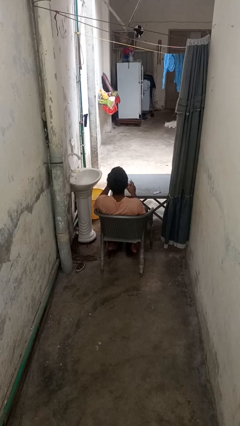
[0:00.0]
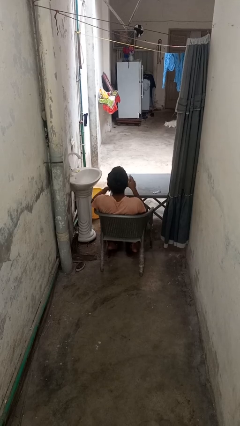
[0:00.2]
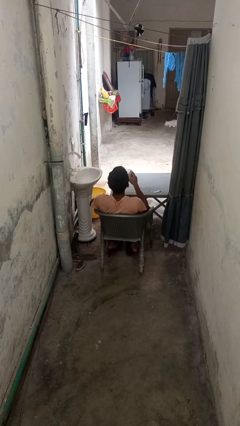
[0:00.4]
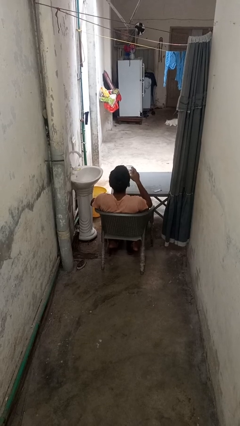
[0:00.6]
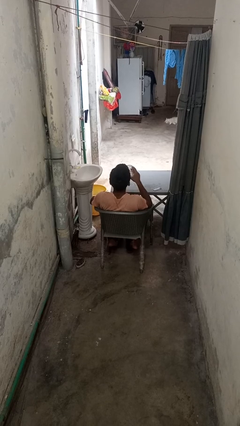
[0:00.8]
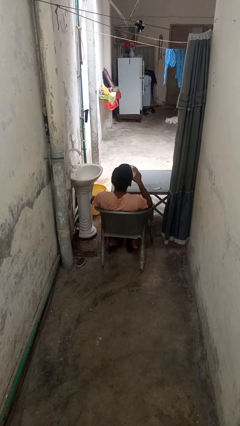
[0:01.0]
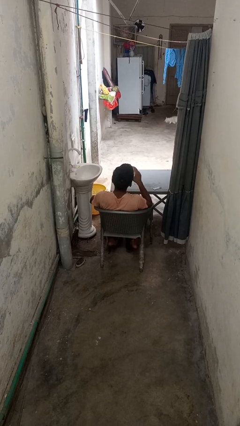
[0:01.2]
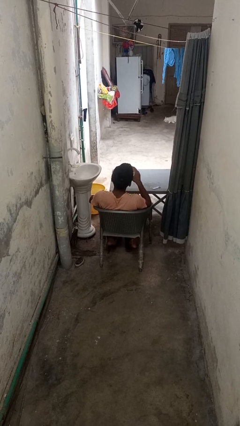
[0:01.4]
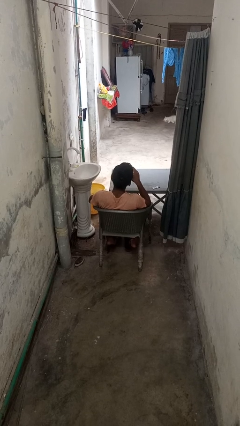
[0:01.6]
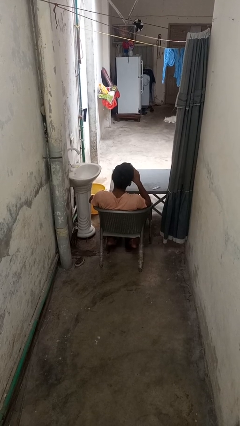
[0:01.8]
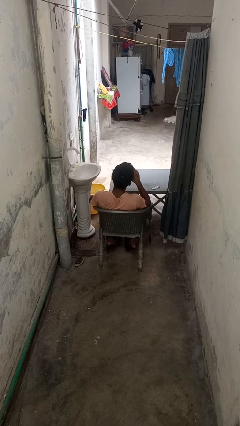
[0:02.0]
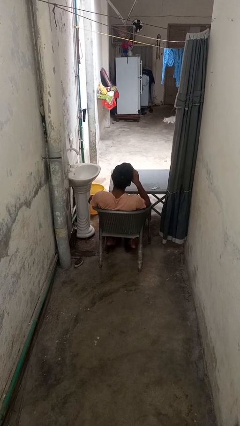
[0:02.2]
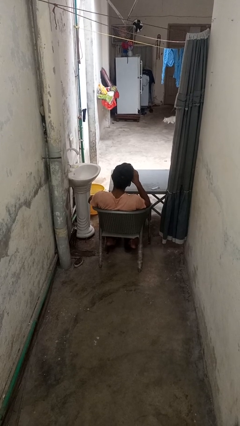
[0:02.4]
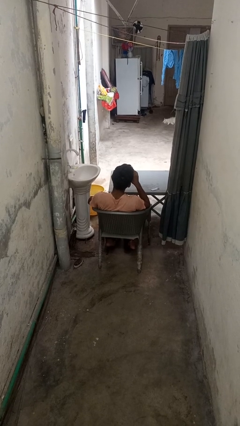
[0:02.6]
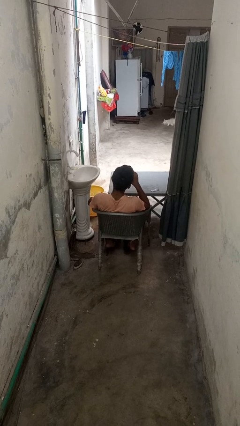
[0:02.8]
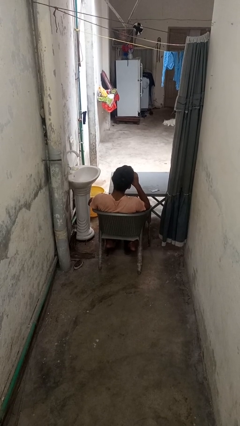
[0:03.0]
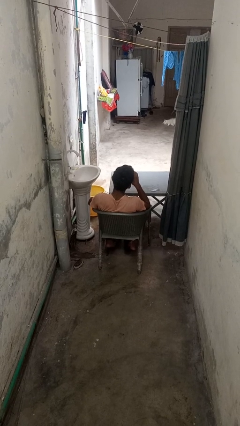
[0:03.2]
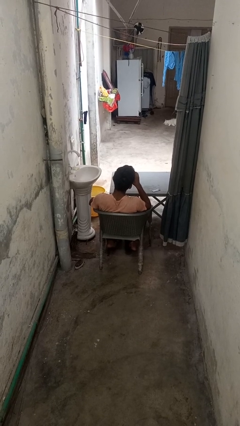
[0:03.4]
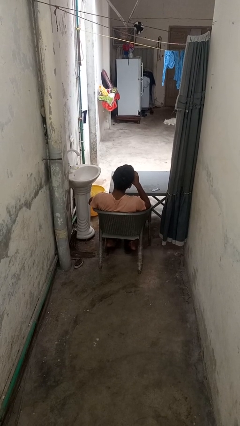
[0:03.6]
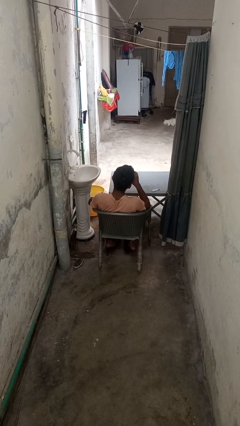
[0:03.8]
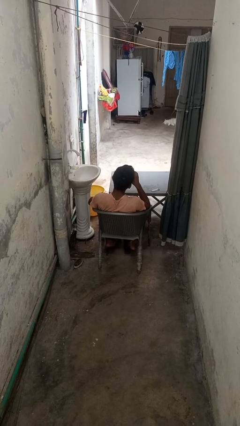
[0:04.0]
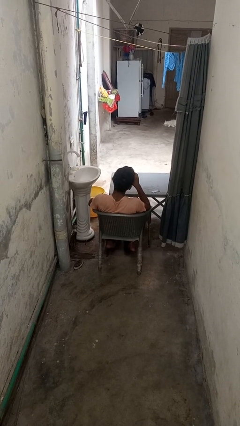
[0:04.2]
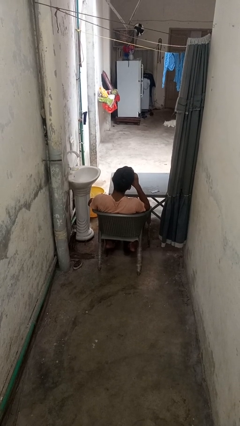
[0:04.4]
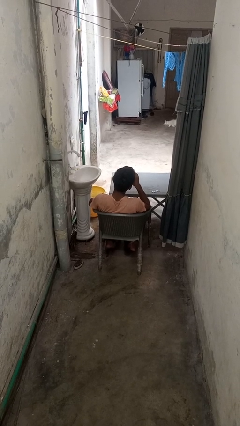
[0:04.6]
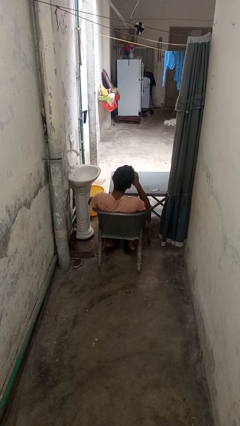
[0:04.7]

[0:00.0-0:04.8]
person drinks from cup

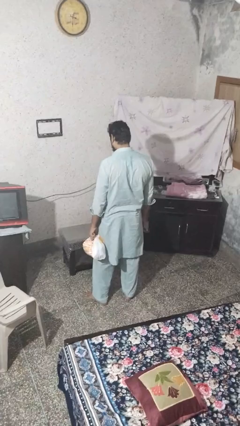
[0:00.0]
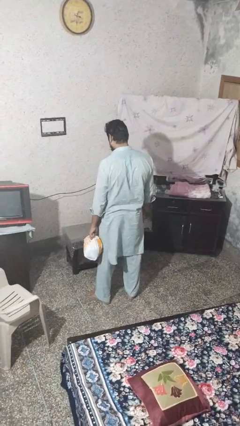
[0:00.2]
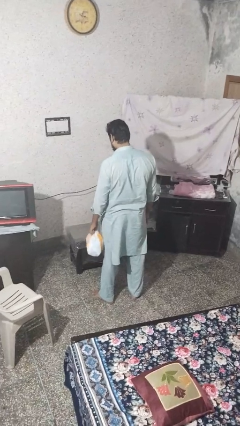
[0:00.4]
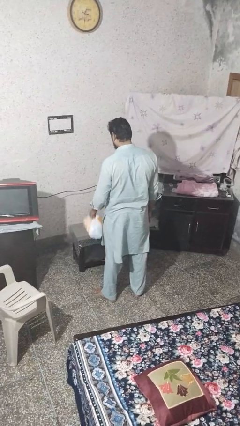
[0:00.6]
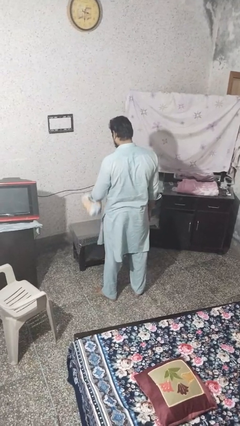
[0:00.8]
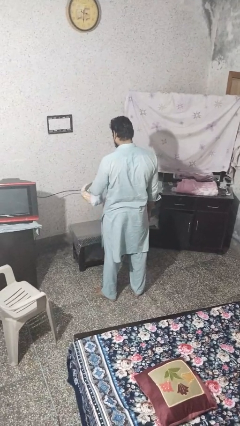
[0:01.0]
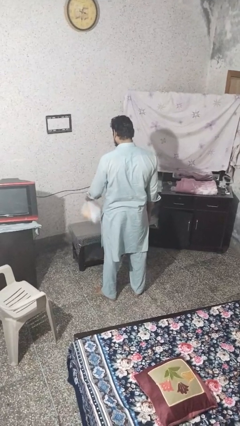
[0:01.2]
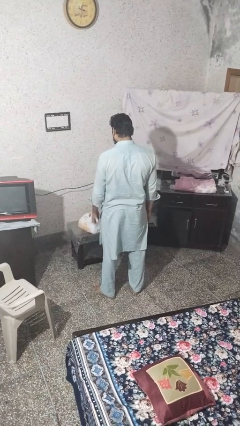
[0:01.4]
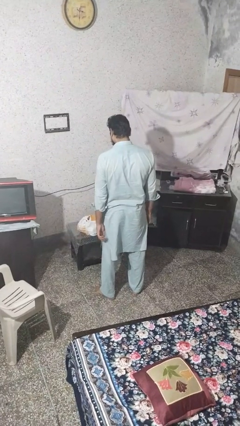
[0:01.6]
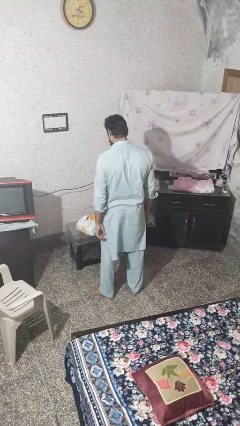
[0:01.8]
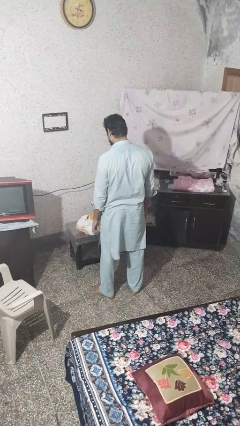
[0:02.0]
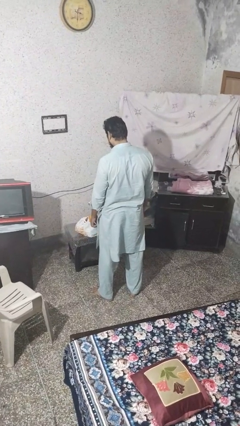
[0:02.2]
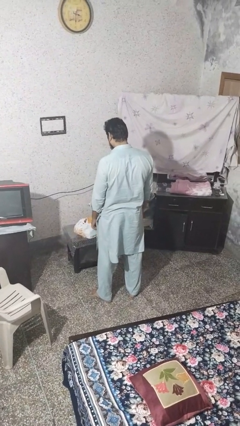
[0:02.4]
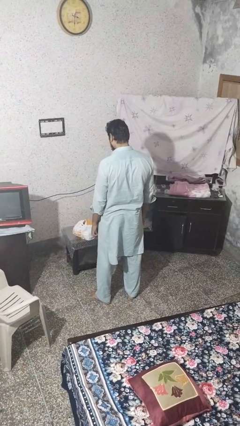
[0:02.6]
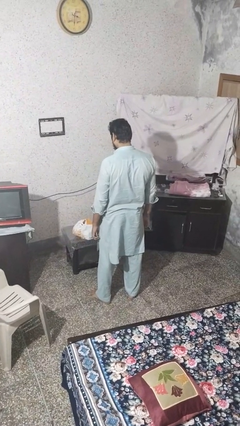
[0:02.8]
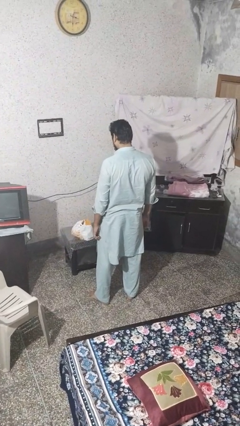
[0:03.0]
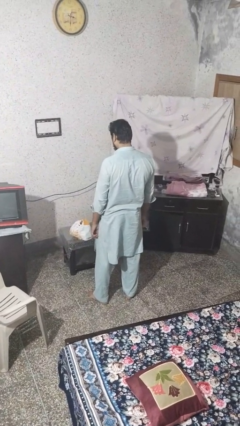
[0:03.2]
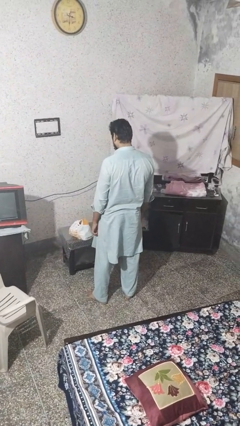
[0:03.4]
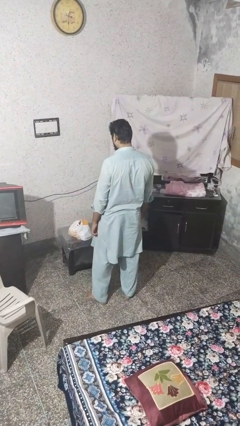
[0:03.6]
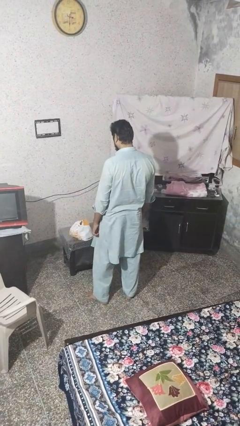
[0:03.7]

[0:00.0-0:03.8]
person throws object on table

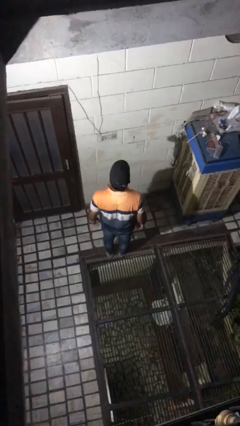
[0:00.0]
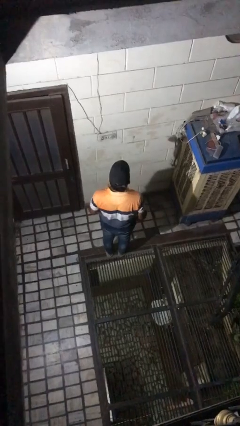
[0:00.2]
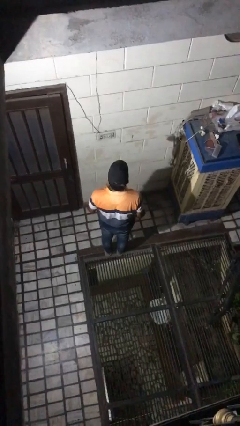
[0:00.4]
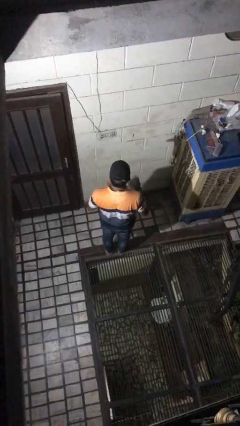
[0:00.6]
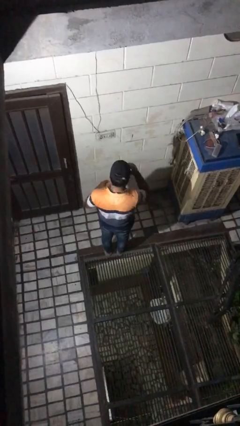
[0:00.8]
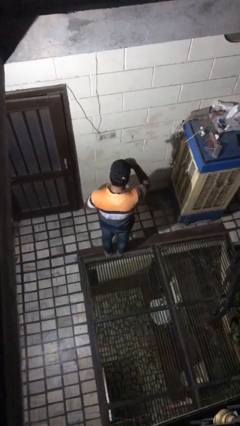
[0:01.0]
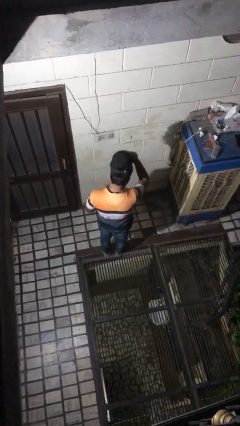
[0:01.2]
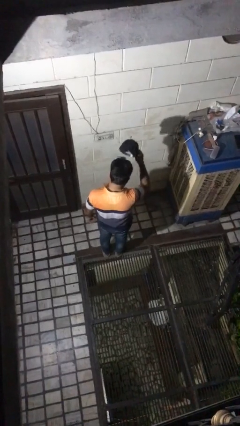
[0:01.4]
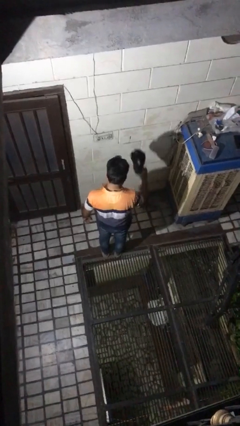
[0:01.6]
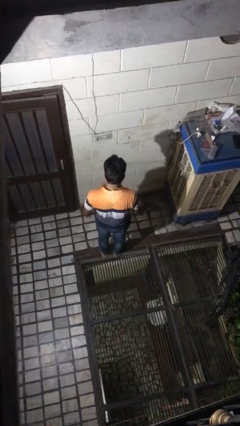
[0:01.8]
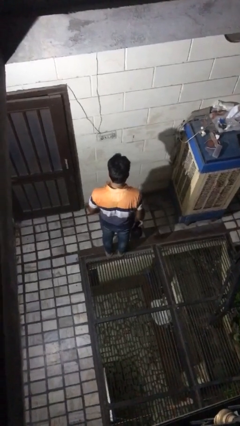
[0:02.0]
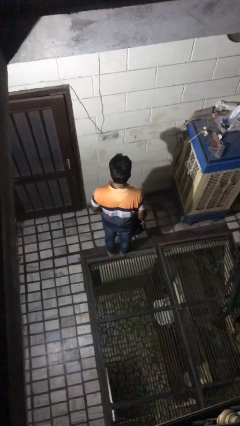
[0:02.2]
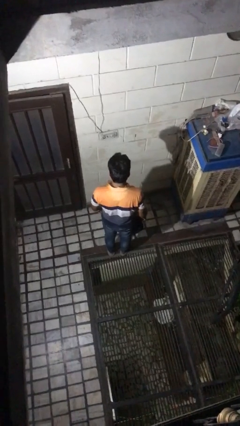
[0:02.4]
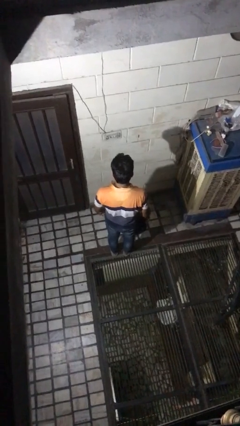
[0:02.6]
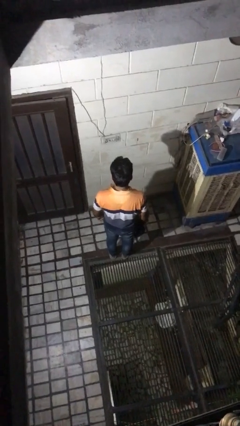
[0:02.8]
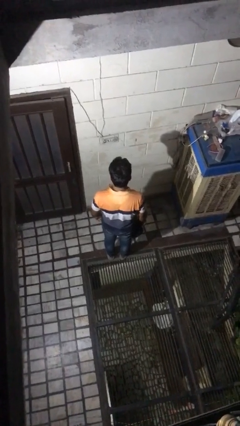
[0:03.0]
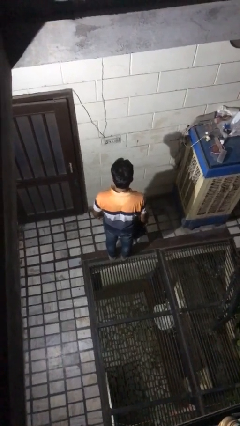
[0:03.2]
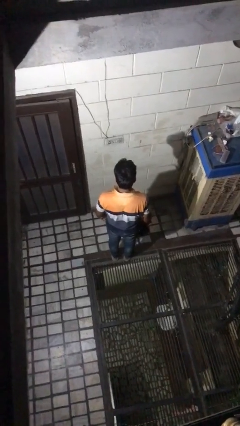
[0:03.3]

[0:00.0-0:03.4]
person takes off hat

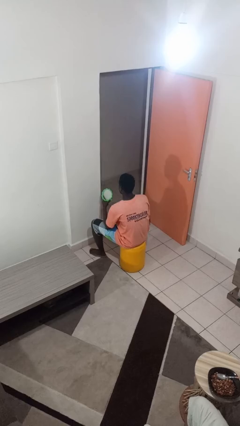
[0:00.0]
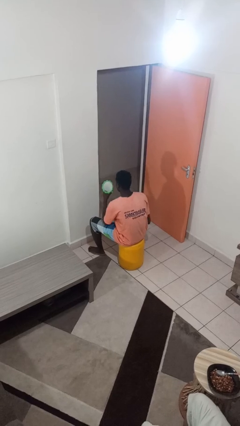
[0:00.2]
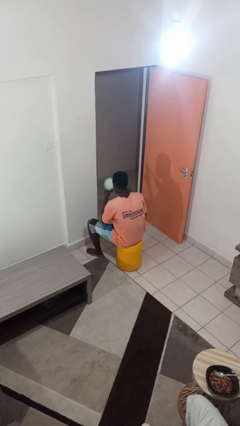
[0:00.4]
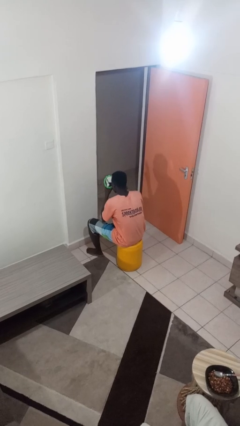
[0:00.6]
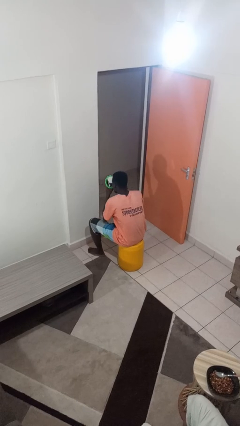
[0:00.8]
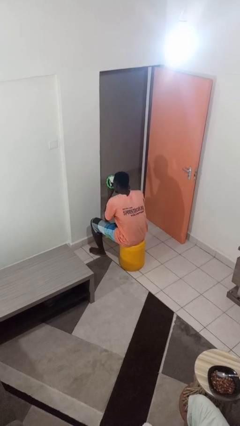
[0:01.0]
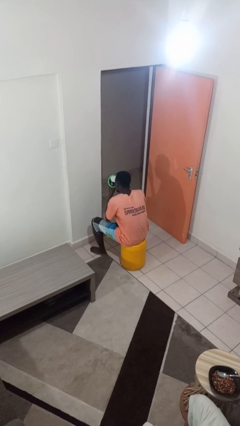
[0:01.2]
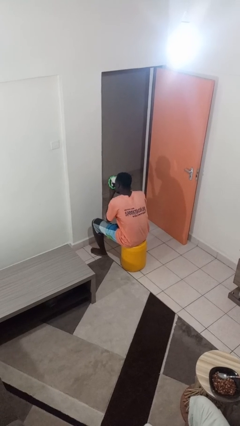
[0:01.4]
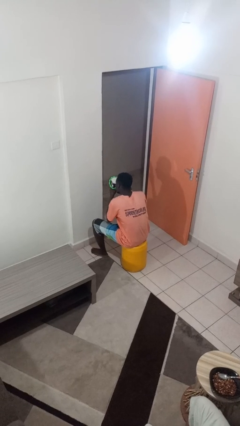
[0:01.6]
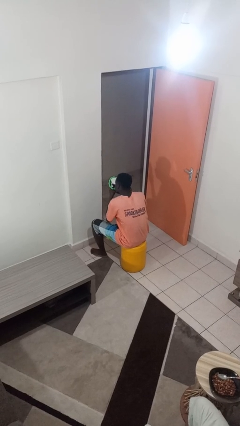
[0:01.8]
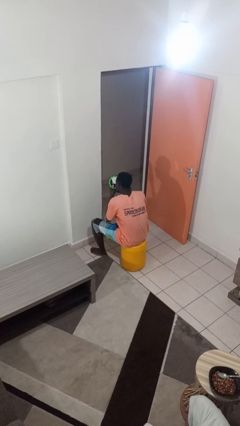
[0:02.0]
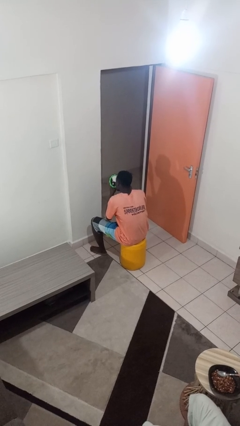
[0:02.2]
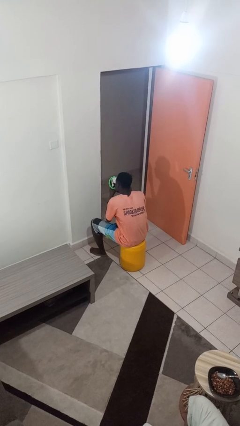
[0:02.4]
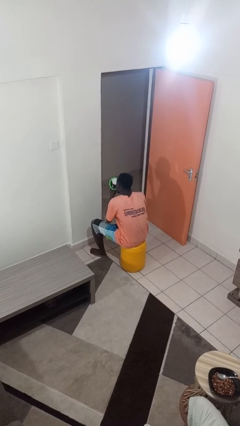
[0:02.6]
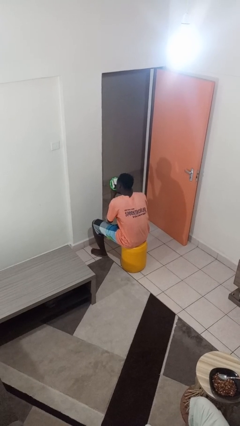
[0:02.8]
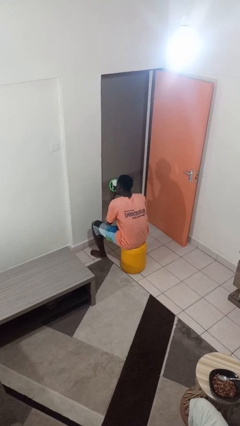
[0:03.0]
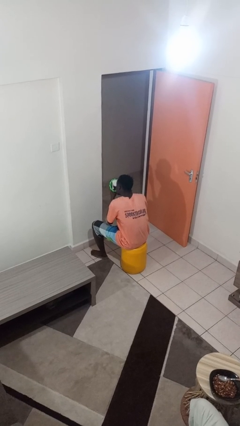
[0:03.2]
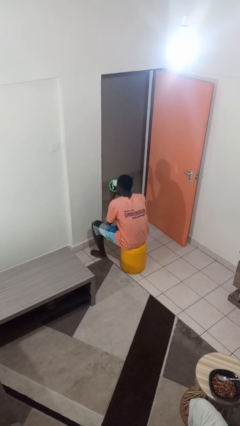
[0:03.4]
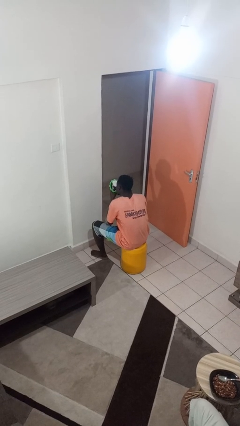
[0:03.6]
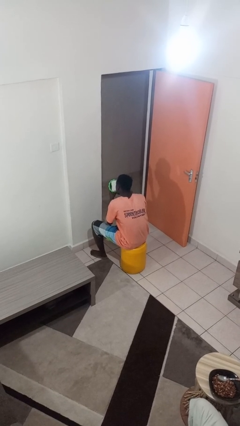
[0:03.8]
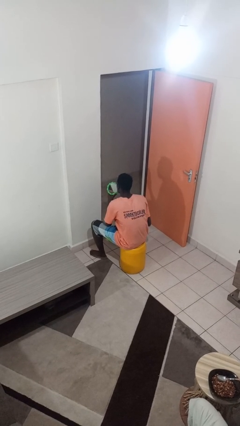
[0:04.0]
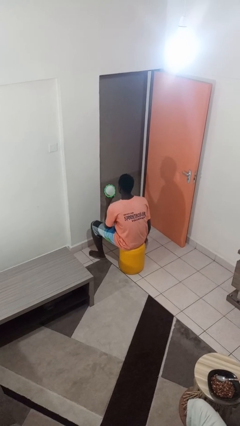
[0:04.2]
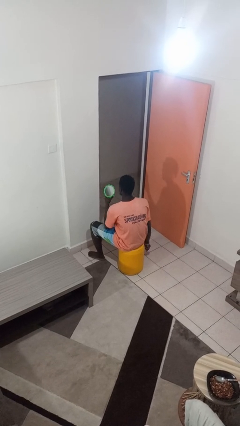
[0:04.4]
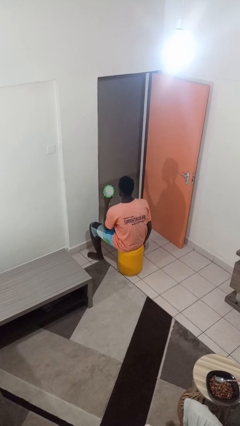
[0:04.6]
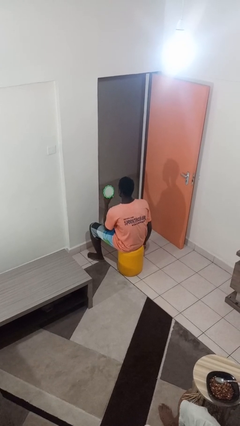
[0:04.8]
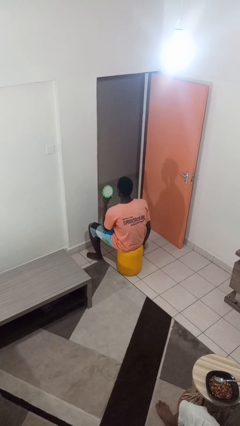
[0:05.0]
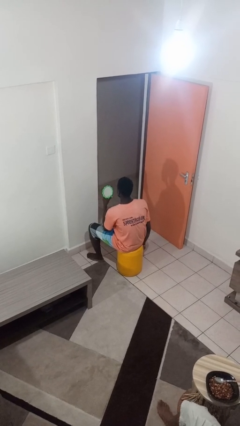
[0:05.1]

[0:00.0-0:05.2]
person applies eye makeup

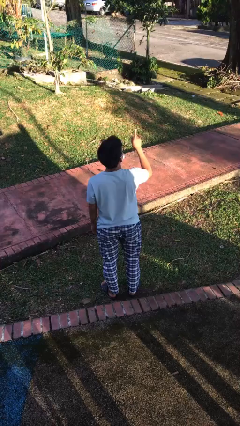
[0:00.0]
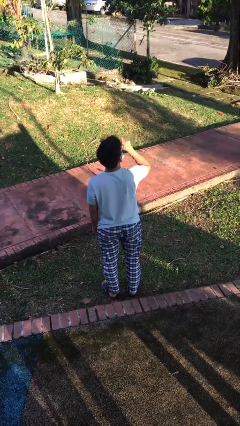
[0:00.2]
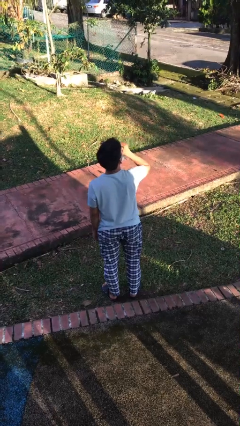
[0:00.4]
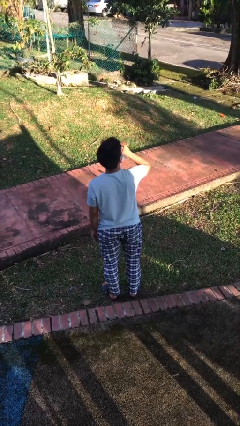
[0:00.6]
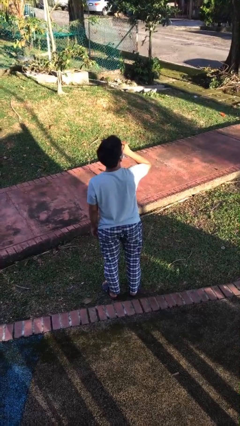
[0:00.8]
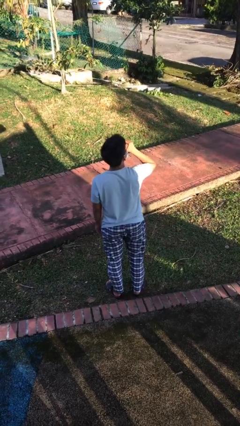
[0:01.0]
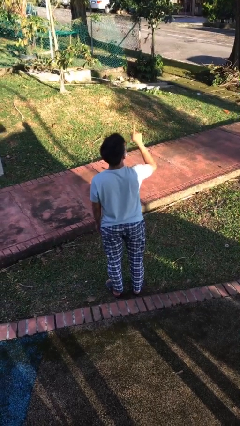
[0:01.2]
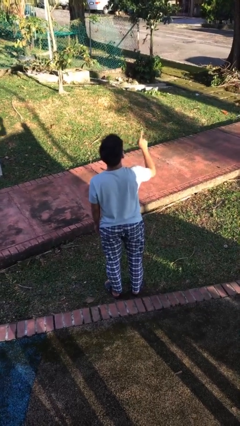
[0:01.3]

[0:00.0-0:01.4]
person gestures be quiet
